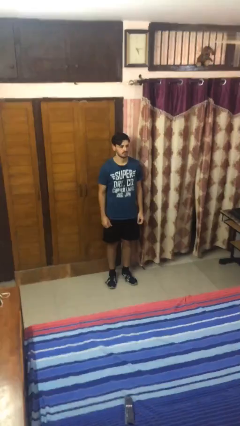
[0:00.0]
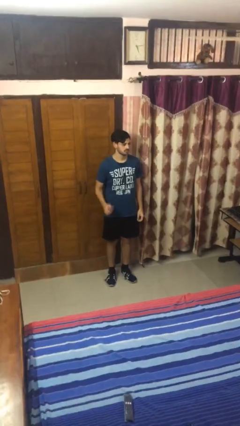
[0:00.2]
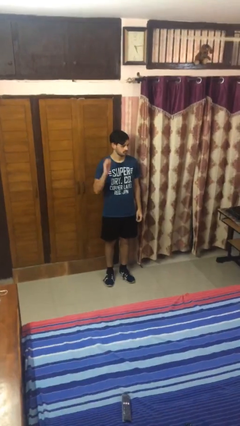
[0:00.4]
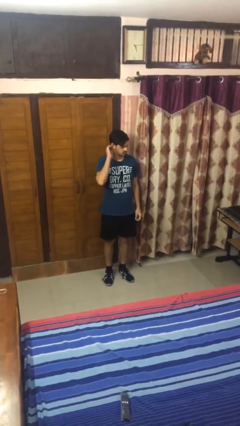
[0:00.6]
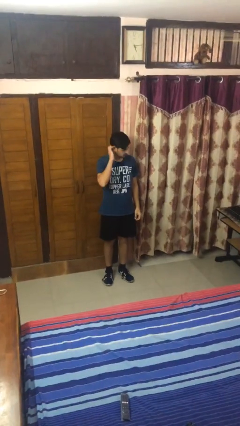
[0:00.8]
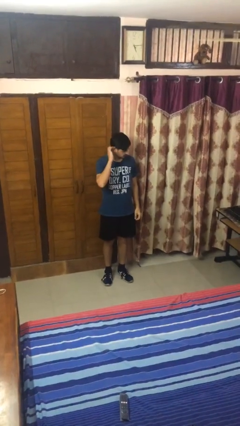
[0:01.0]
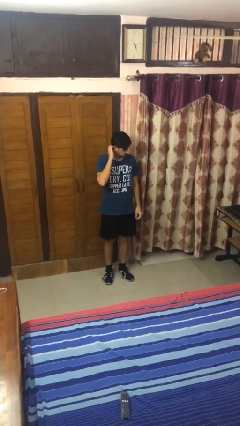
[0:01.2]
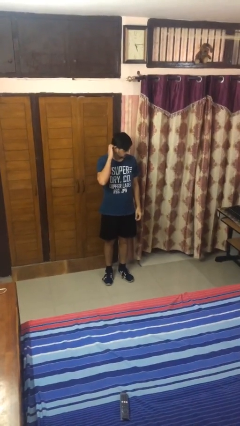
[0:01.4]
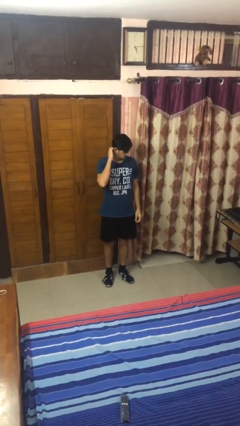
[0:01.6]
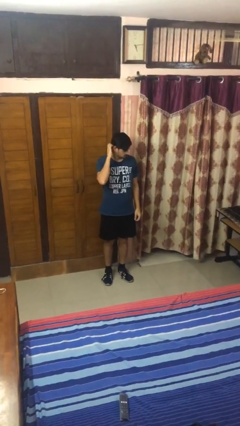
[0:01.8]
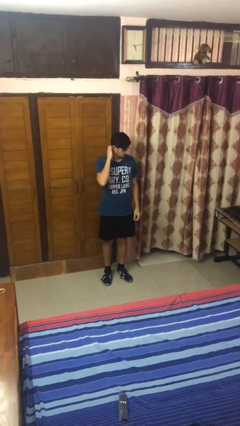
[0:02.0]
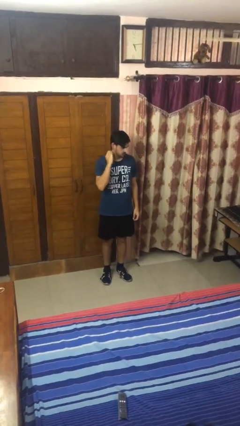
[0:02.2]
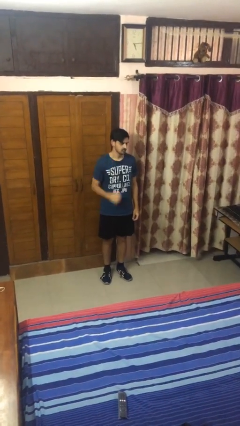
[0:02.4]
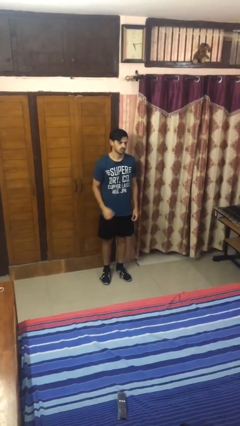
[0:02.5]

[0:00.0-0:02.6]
person scratches face

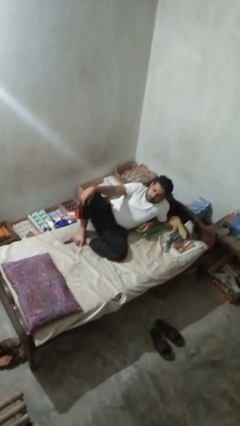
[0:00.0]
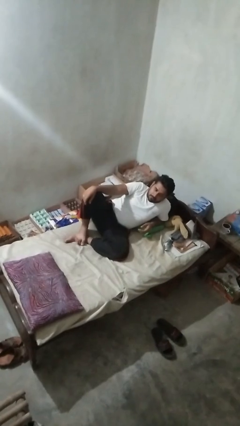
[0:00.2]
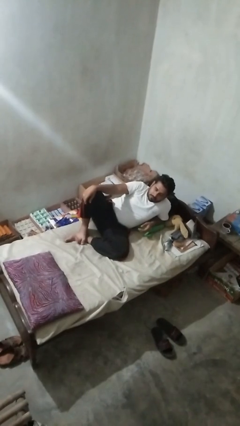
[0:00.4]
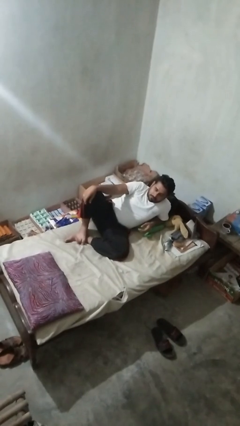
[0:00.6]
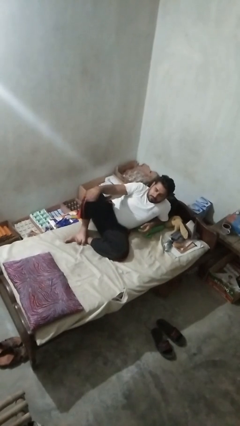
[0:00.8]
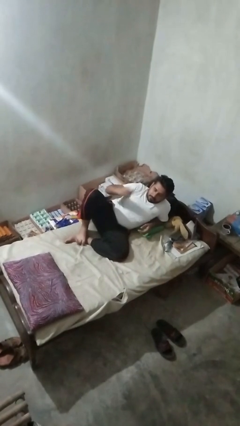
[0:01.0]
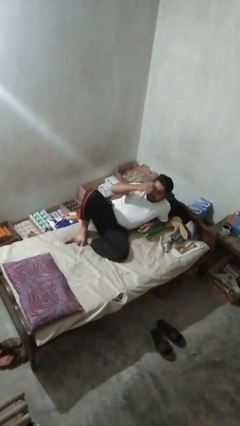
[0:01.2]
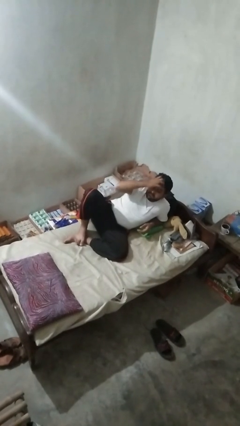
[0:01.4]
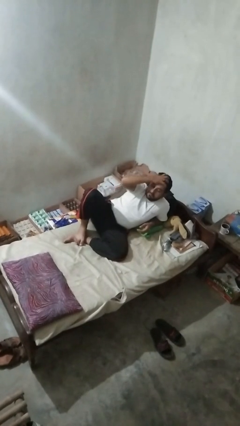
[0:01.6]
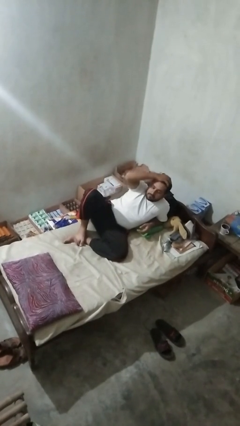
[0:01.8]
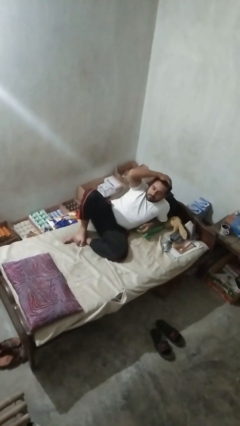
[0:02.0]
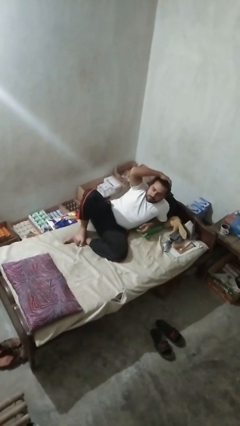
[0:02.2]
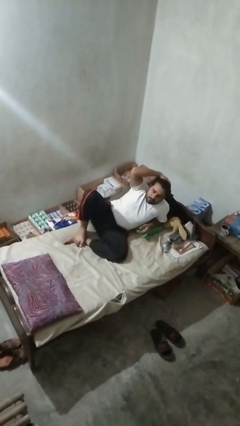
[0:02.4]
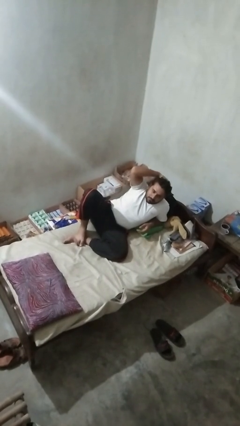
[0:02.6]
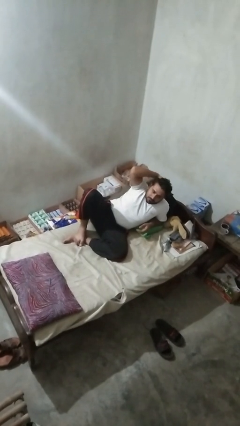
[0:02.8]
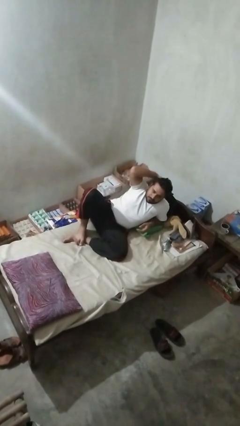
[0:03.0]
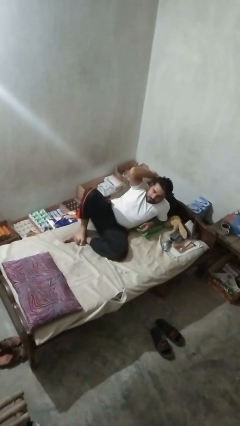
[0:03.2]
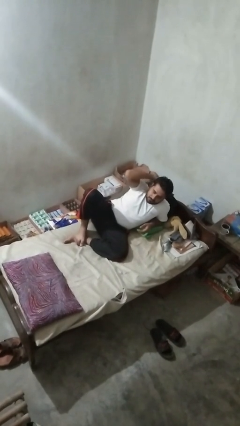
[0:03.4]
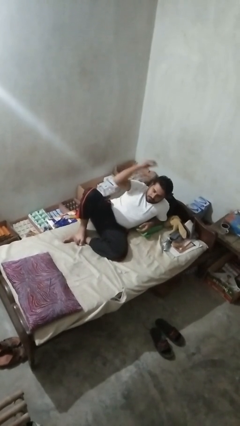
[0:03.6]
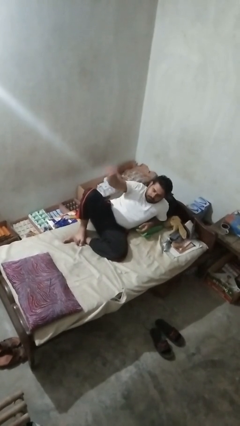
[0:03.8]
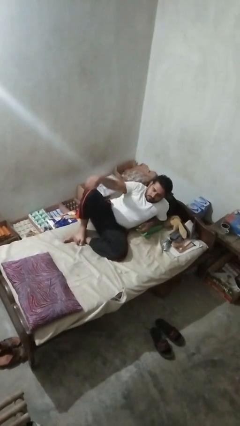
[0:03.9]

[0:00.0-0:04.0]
person strokes hair

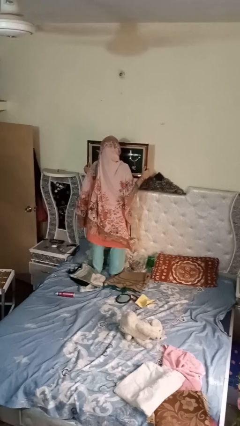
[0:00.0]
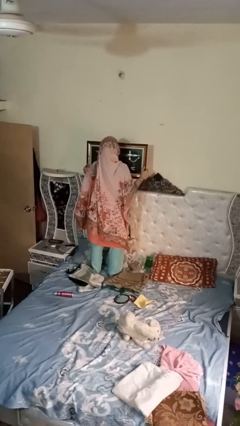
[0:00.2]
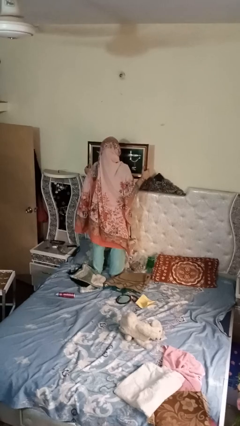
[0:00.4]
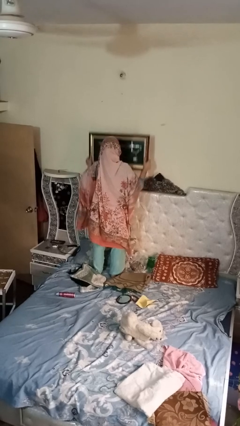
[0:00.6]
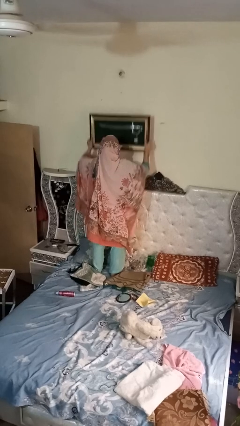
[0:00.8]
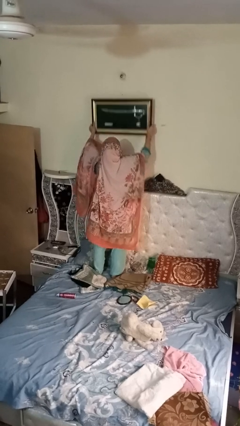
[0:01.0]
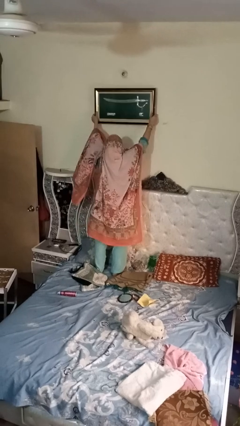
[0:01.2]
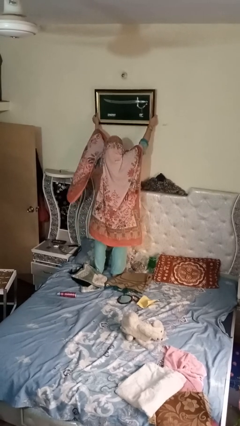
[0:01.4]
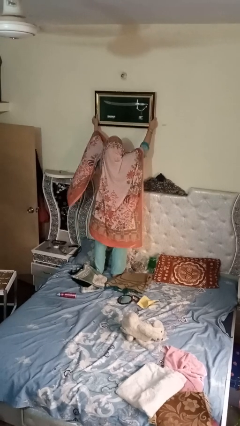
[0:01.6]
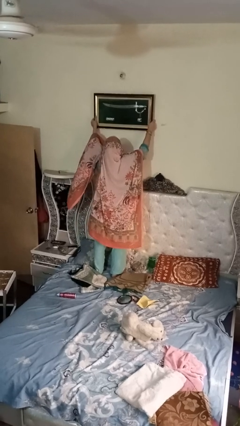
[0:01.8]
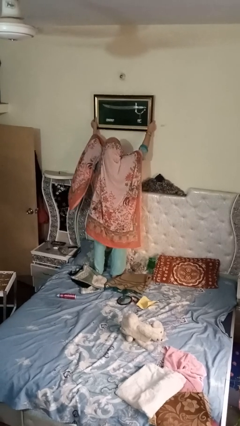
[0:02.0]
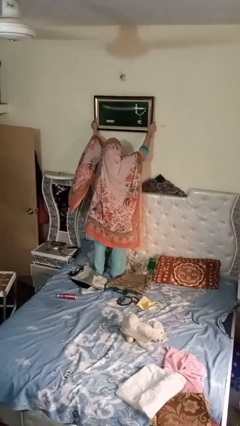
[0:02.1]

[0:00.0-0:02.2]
person takes down picture frame

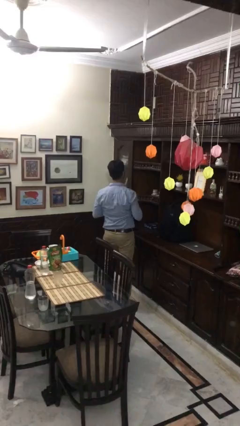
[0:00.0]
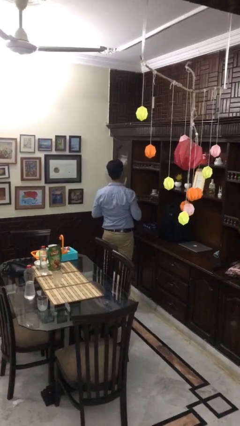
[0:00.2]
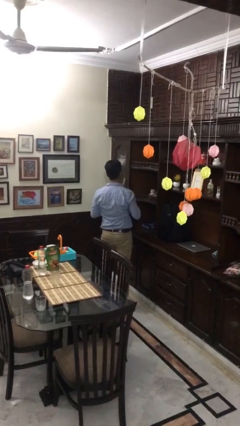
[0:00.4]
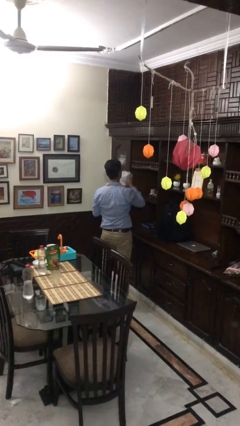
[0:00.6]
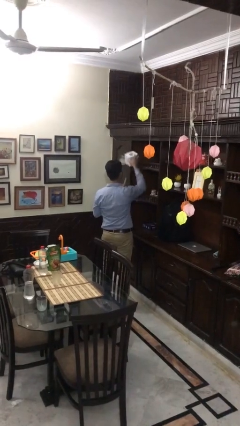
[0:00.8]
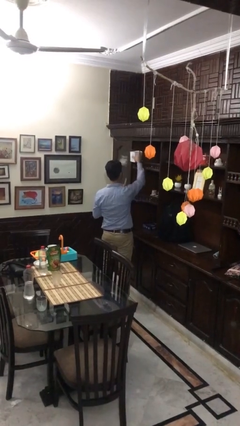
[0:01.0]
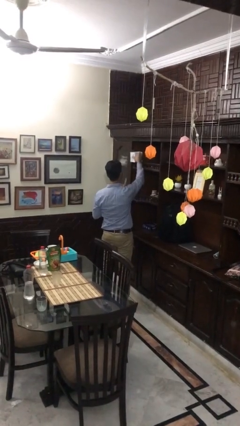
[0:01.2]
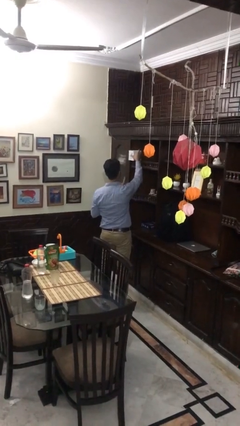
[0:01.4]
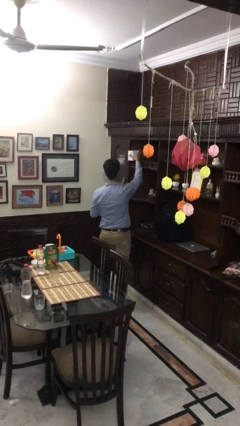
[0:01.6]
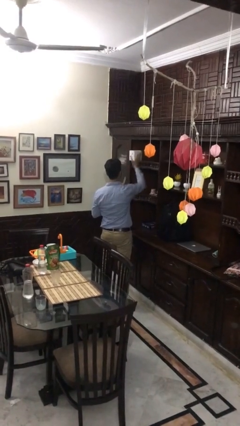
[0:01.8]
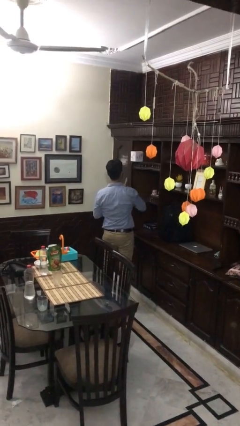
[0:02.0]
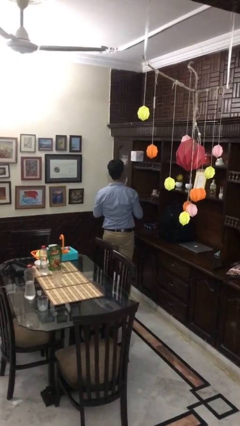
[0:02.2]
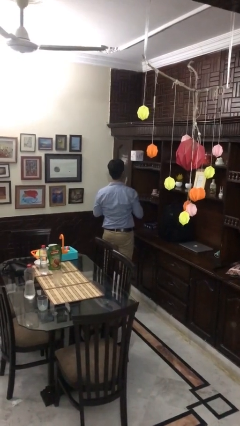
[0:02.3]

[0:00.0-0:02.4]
person puts down object on shelf

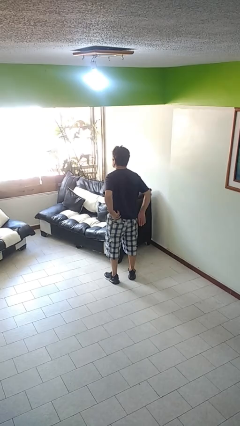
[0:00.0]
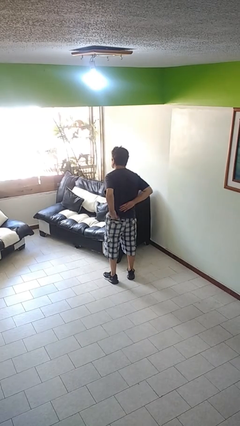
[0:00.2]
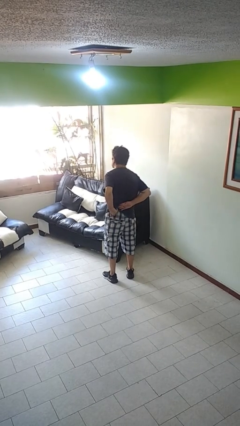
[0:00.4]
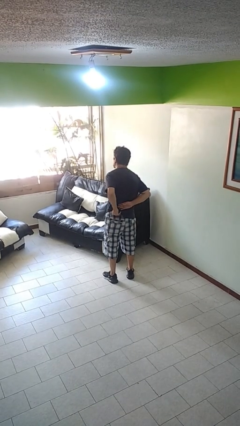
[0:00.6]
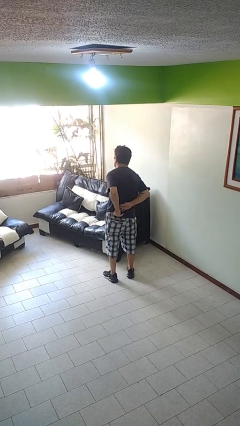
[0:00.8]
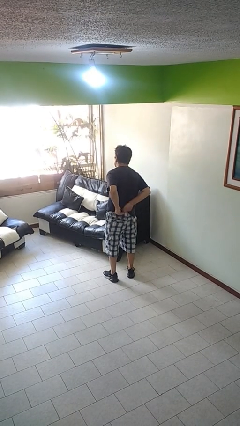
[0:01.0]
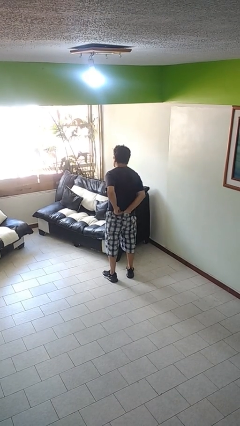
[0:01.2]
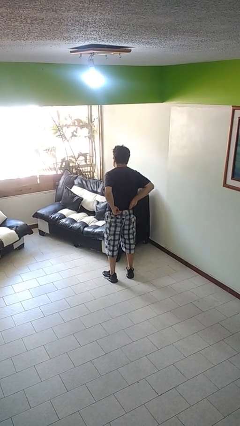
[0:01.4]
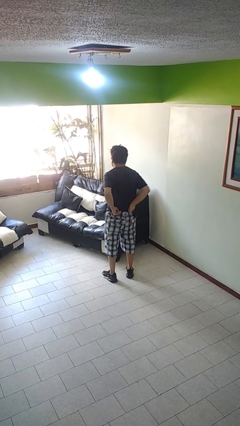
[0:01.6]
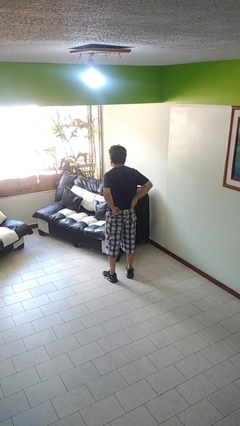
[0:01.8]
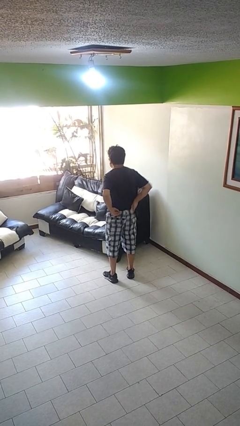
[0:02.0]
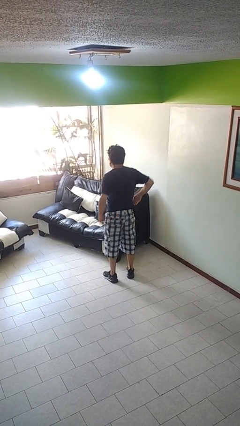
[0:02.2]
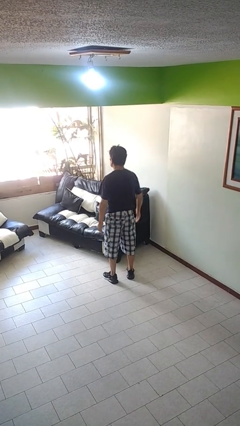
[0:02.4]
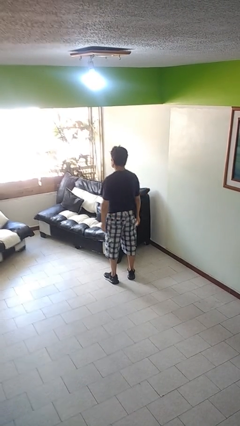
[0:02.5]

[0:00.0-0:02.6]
person tucks in shirt

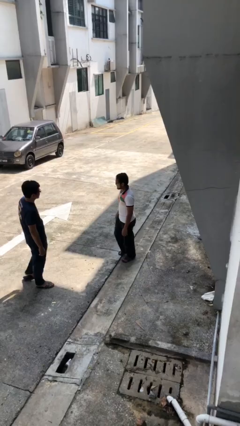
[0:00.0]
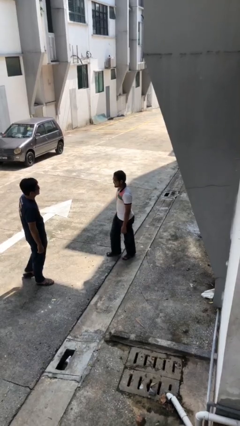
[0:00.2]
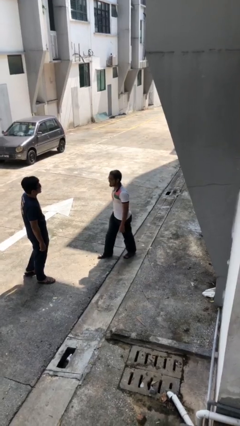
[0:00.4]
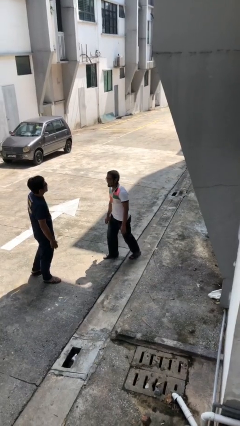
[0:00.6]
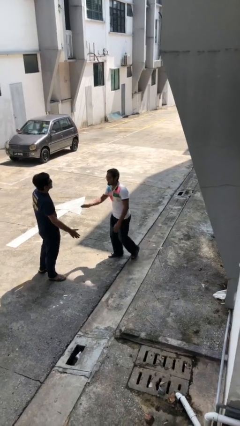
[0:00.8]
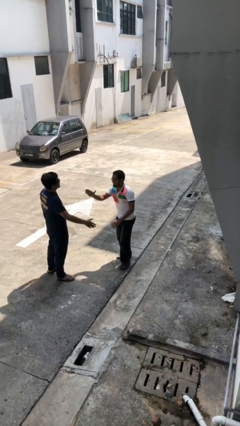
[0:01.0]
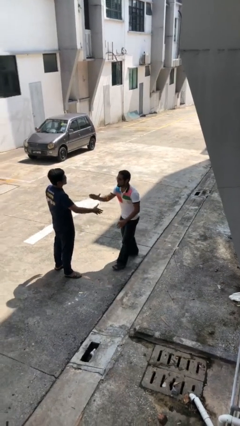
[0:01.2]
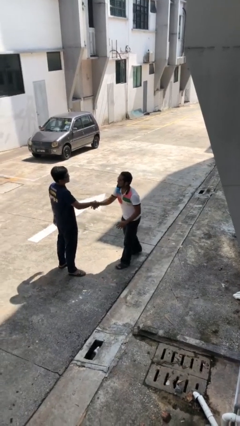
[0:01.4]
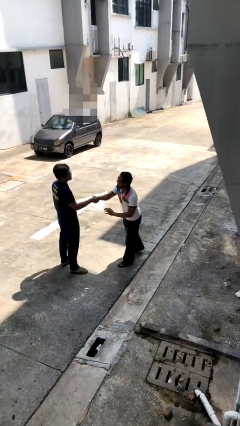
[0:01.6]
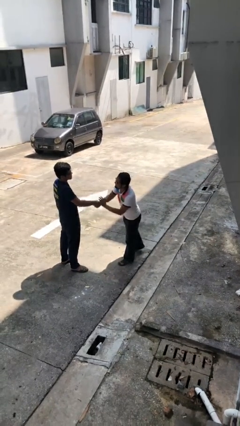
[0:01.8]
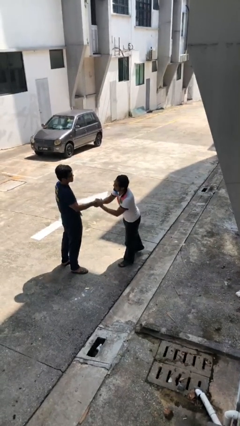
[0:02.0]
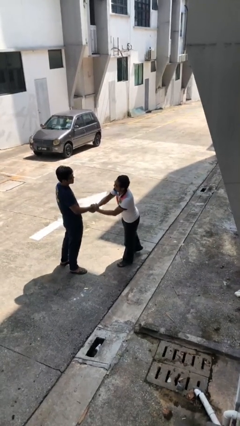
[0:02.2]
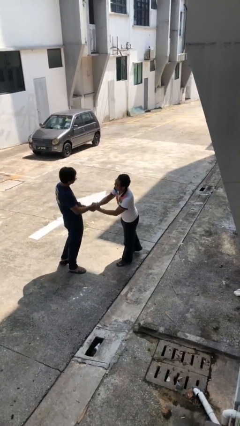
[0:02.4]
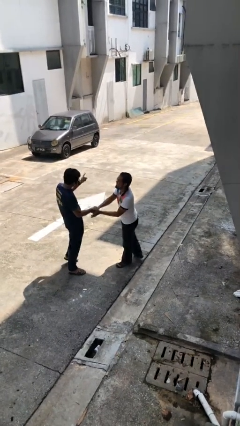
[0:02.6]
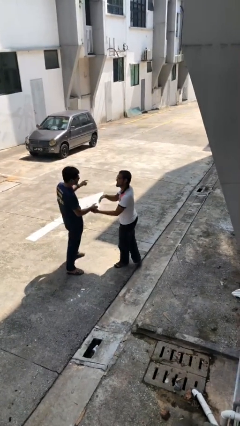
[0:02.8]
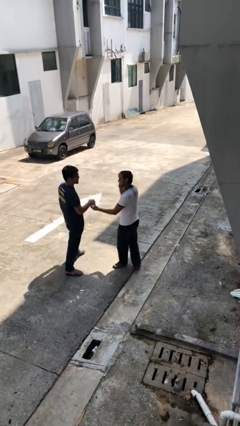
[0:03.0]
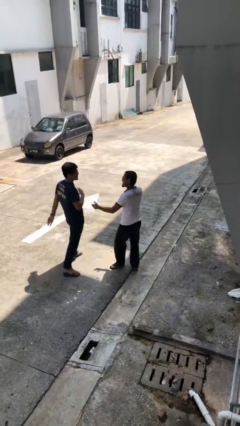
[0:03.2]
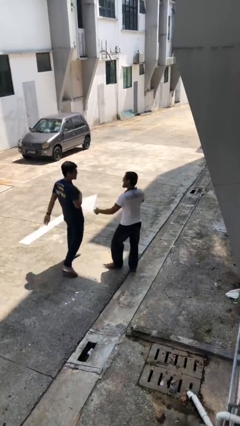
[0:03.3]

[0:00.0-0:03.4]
person shakes hand

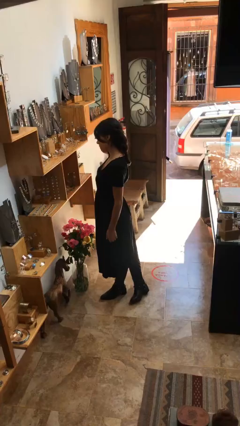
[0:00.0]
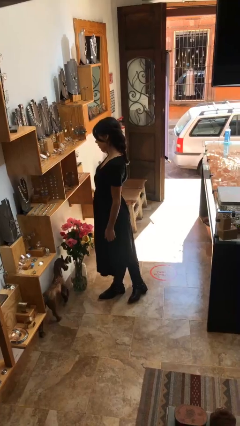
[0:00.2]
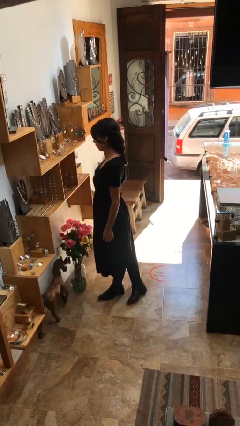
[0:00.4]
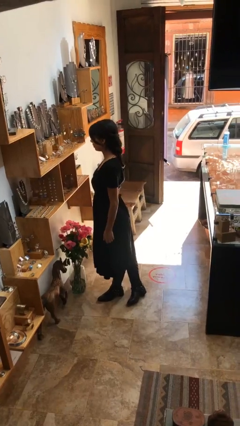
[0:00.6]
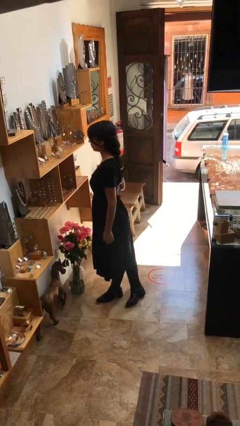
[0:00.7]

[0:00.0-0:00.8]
person picks up object from table
